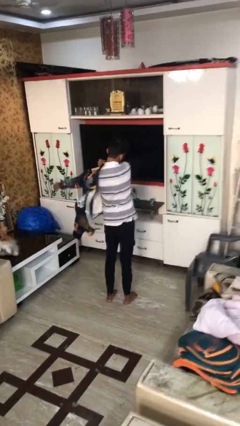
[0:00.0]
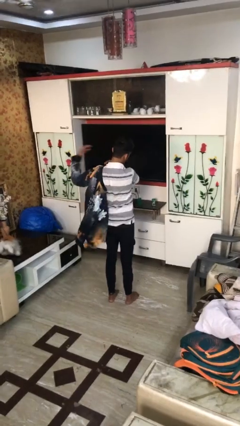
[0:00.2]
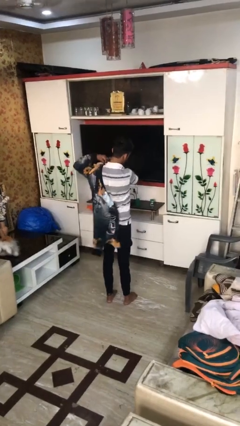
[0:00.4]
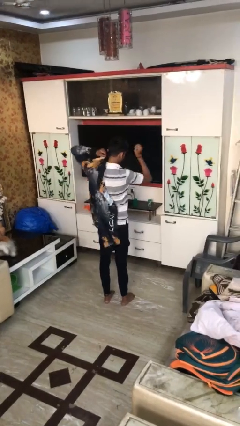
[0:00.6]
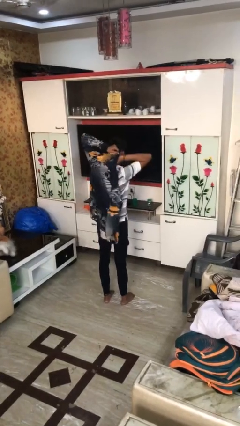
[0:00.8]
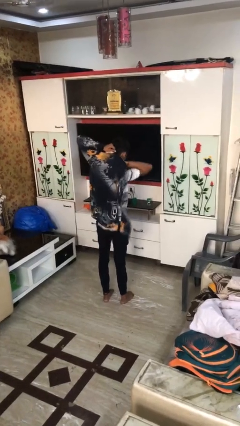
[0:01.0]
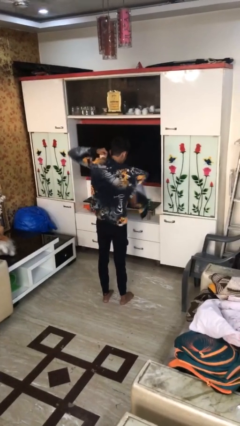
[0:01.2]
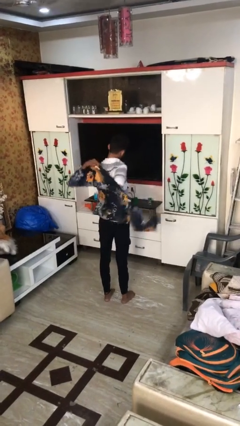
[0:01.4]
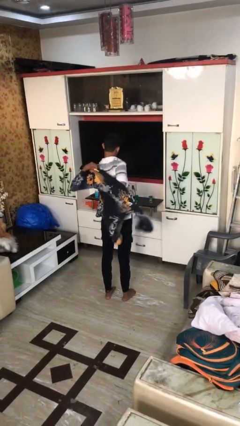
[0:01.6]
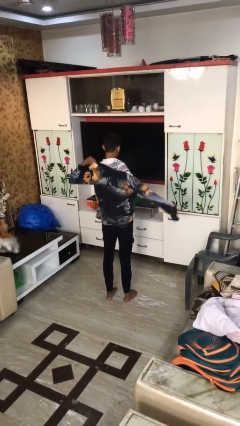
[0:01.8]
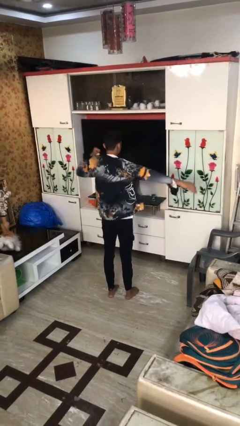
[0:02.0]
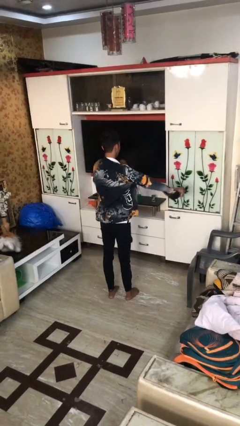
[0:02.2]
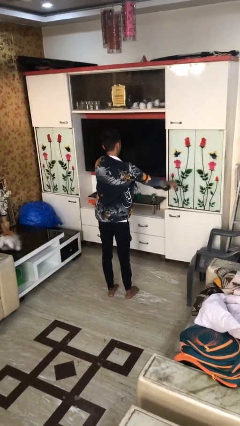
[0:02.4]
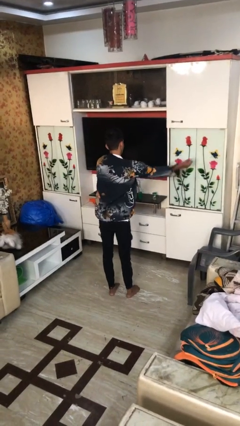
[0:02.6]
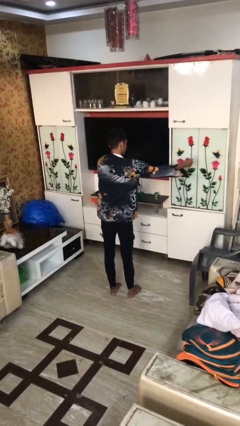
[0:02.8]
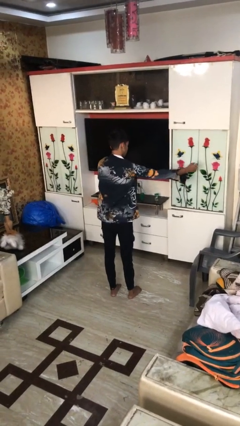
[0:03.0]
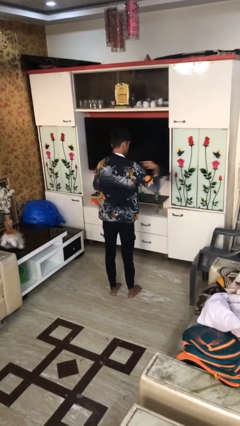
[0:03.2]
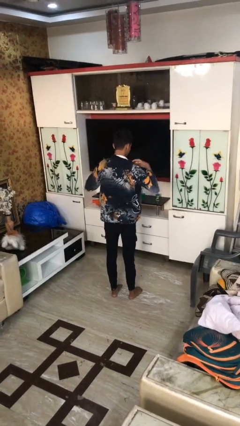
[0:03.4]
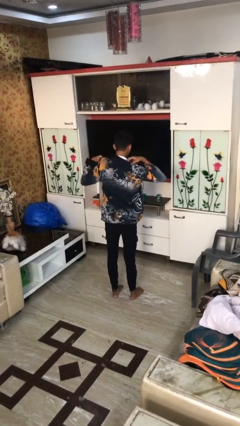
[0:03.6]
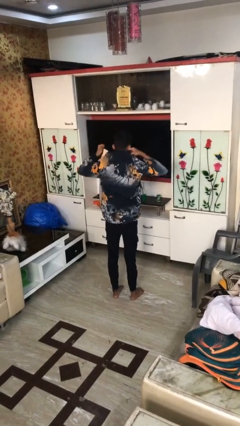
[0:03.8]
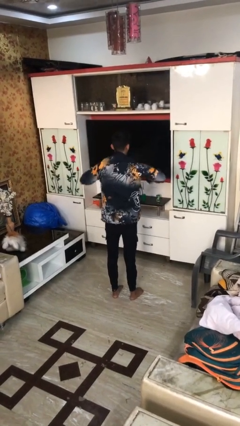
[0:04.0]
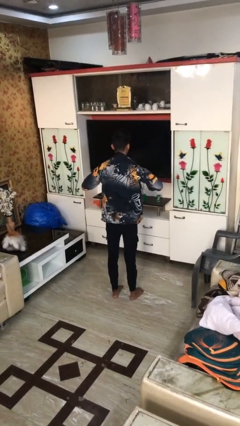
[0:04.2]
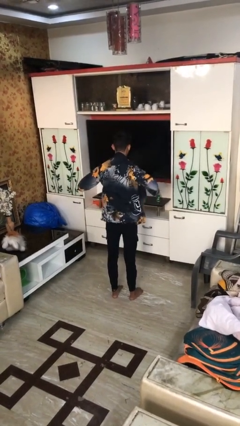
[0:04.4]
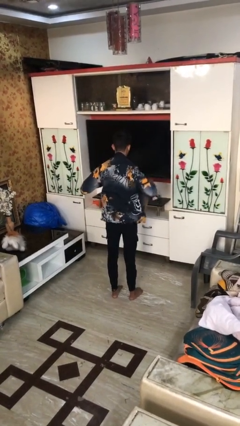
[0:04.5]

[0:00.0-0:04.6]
person puts on shirt

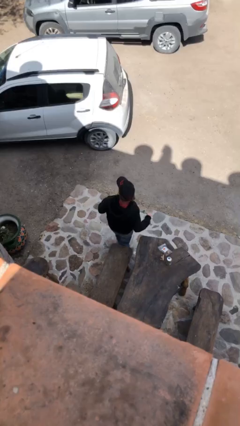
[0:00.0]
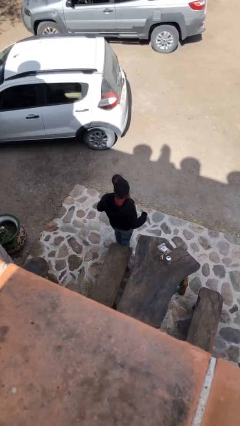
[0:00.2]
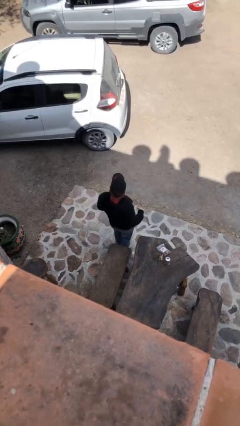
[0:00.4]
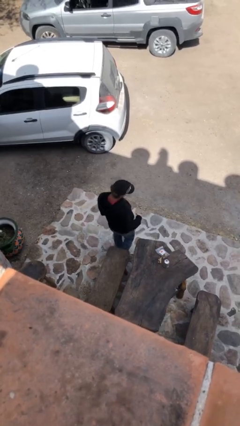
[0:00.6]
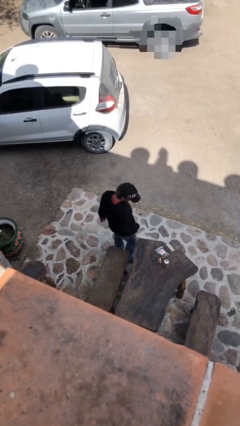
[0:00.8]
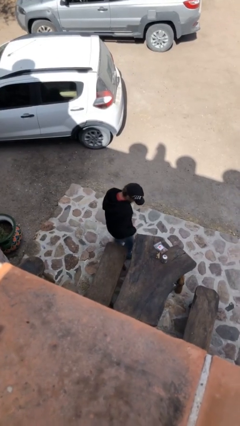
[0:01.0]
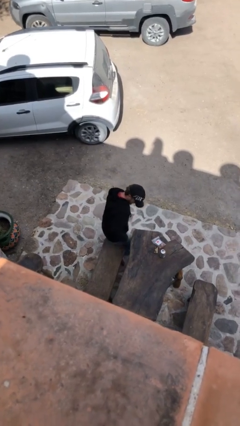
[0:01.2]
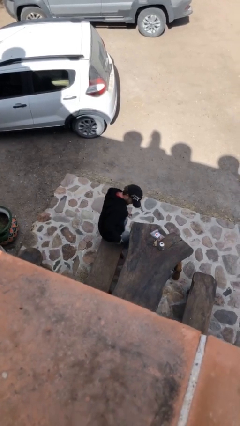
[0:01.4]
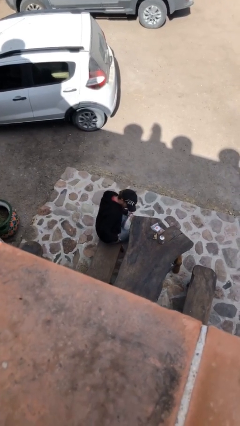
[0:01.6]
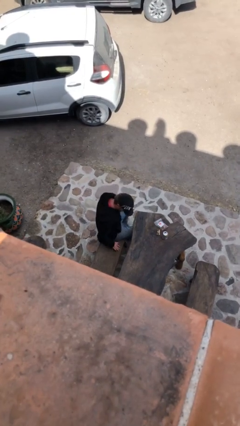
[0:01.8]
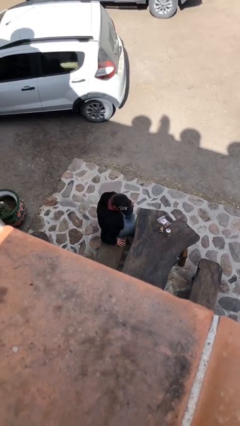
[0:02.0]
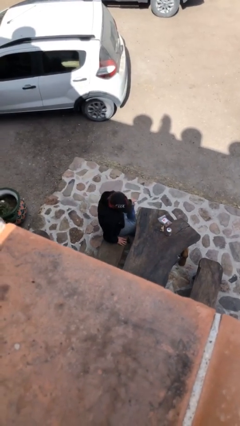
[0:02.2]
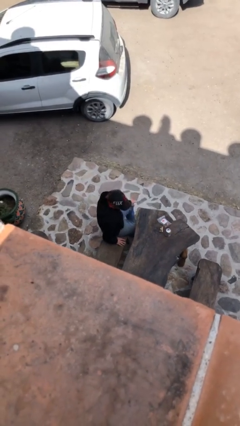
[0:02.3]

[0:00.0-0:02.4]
person sits down

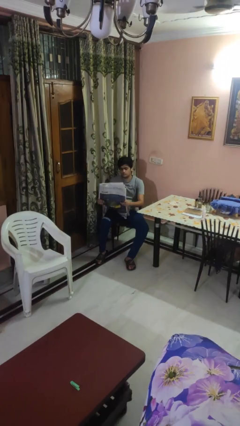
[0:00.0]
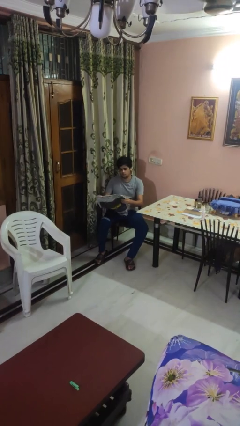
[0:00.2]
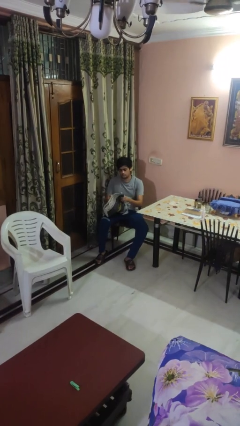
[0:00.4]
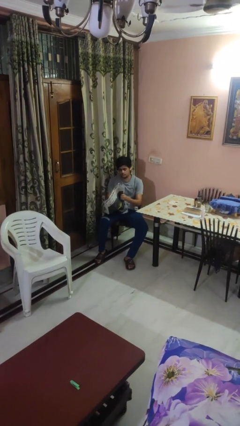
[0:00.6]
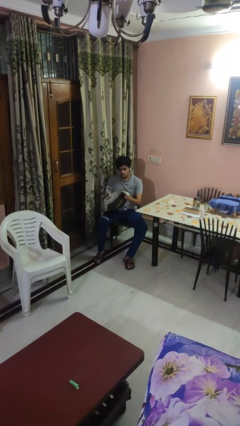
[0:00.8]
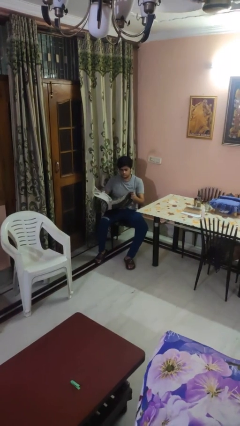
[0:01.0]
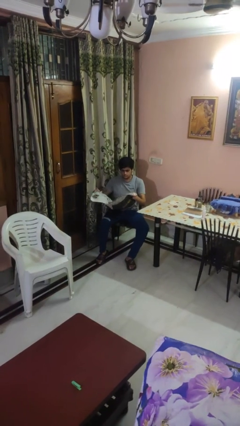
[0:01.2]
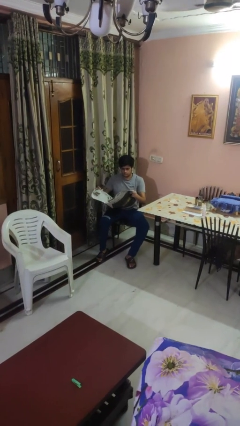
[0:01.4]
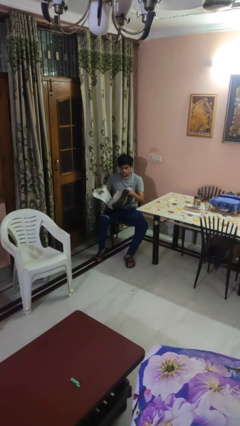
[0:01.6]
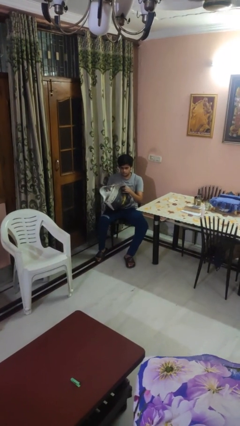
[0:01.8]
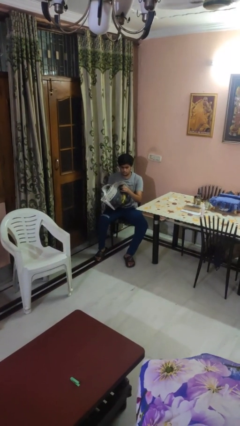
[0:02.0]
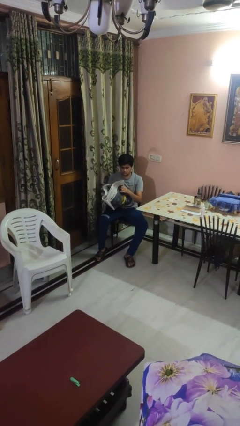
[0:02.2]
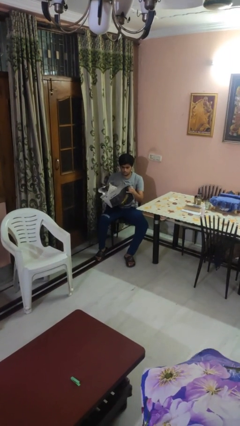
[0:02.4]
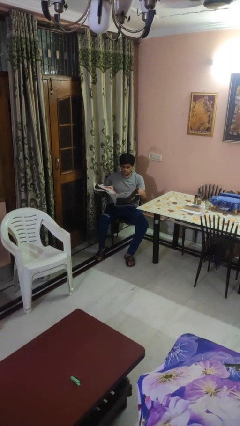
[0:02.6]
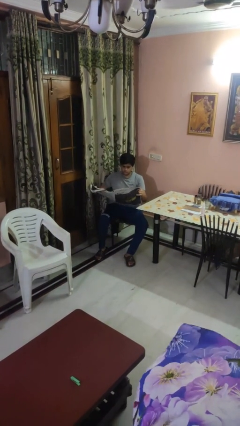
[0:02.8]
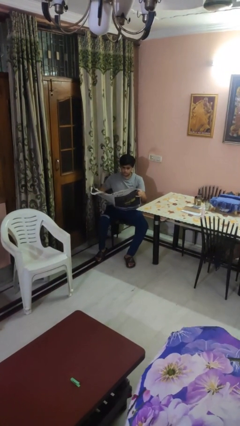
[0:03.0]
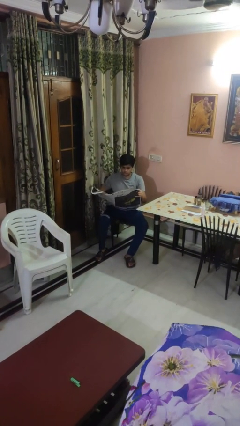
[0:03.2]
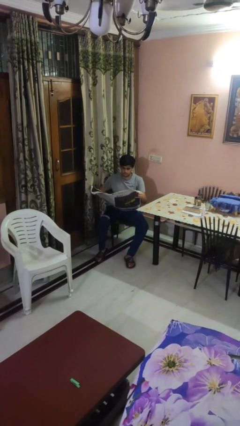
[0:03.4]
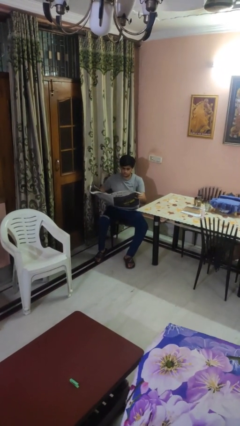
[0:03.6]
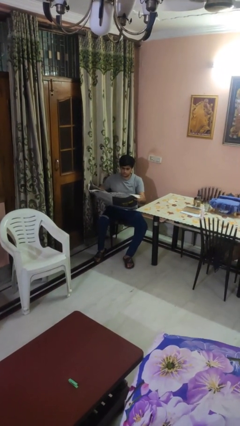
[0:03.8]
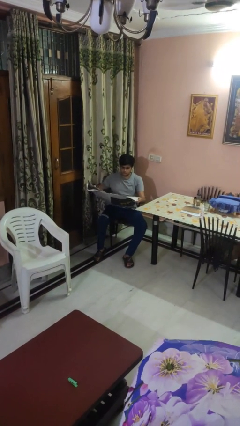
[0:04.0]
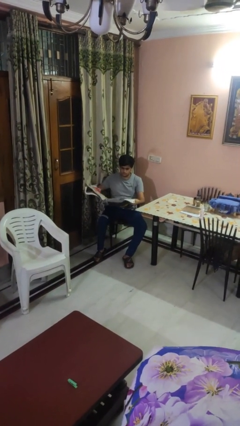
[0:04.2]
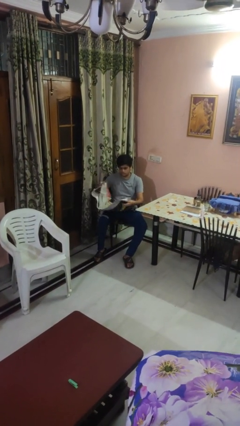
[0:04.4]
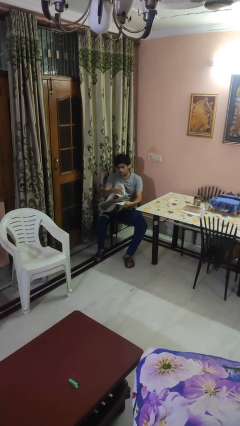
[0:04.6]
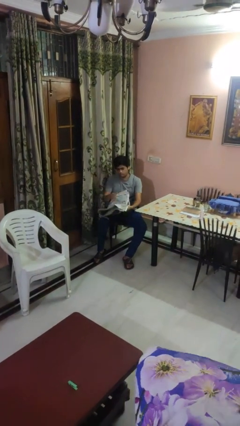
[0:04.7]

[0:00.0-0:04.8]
person reads newspaper

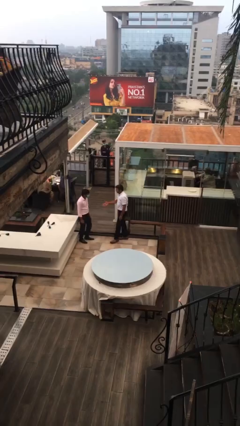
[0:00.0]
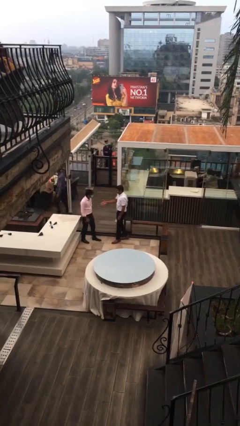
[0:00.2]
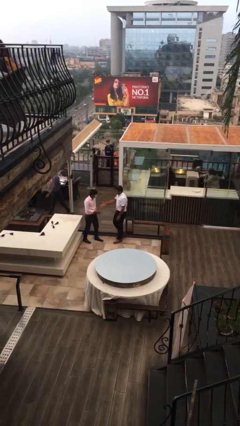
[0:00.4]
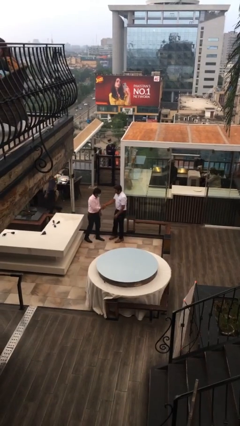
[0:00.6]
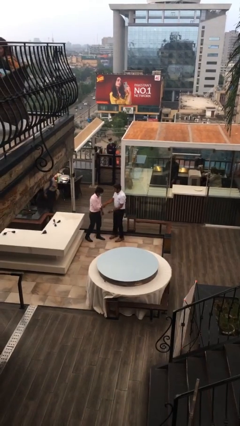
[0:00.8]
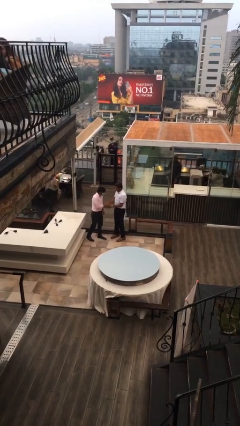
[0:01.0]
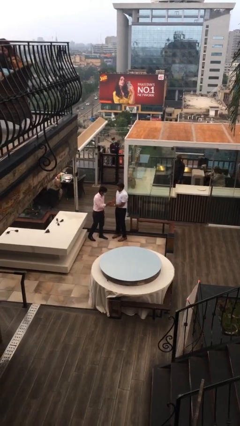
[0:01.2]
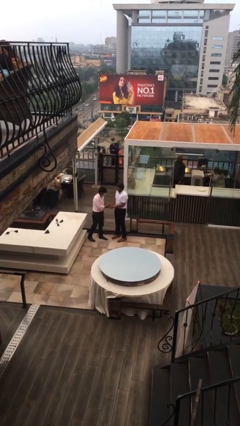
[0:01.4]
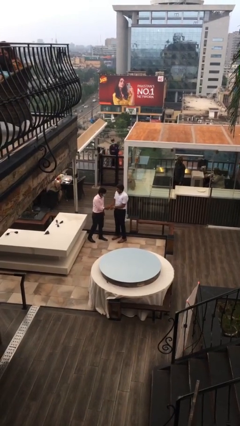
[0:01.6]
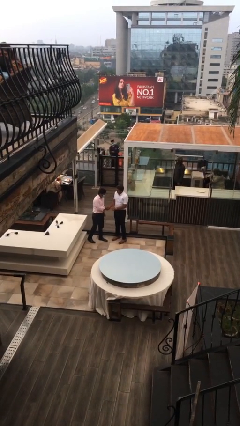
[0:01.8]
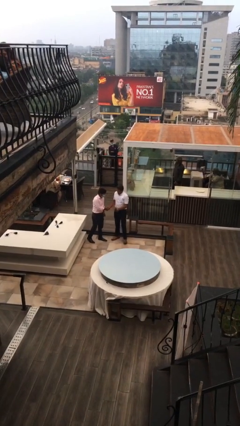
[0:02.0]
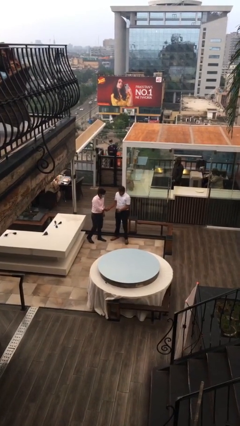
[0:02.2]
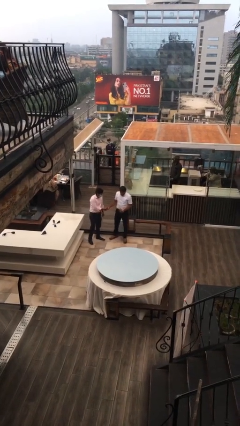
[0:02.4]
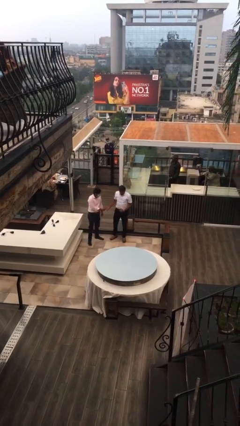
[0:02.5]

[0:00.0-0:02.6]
person shakes hand

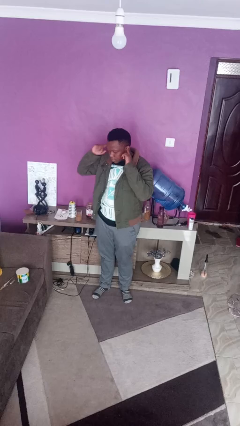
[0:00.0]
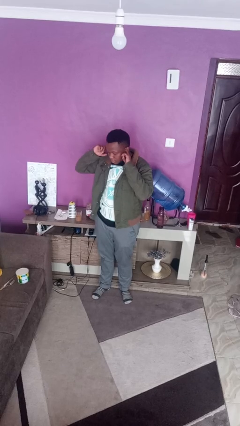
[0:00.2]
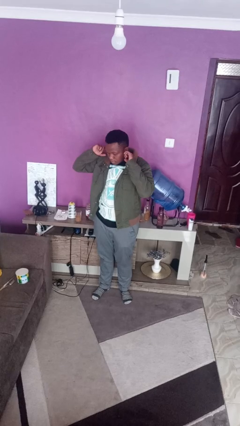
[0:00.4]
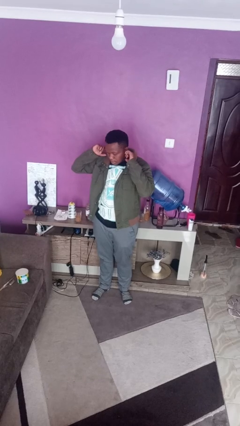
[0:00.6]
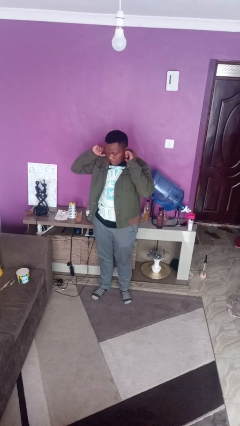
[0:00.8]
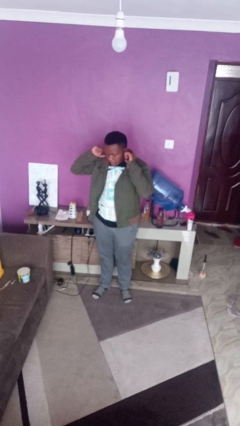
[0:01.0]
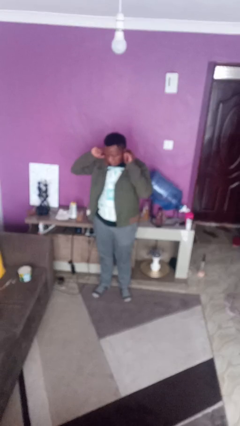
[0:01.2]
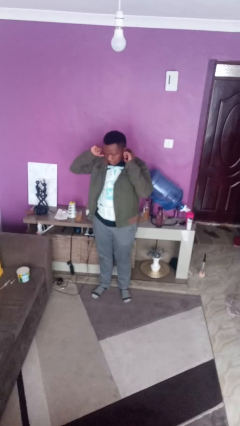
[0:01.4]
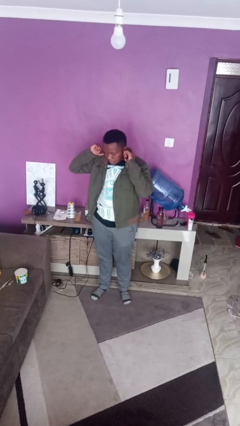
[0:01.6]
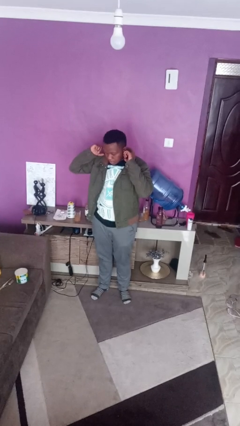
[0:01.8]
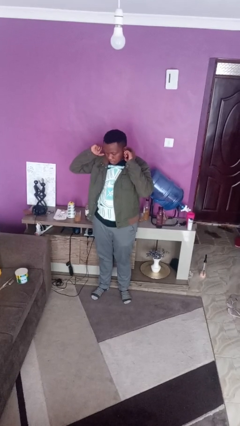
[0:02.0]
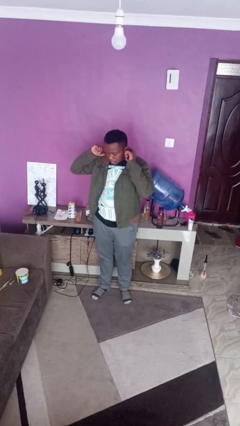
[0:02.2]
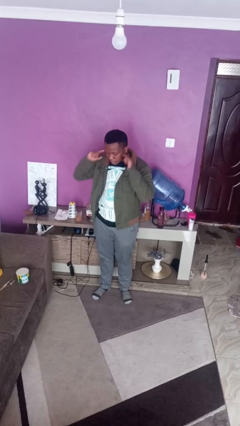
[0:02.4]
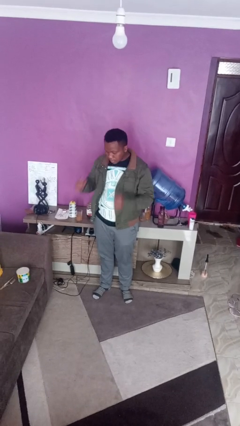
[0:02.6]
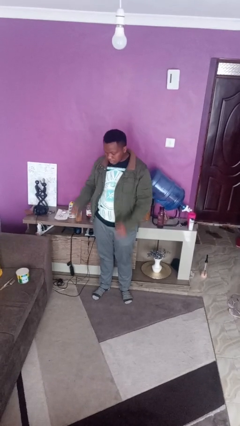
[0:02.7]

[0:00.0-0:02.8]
person puts fingers in ear

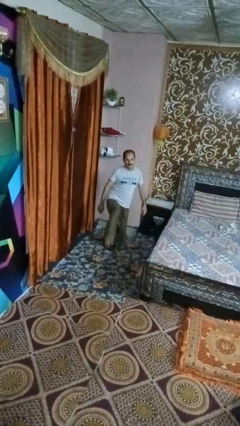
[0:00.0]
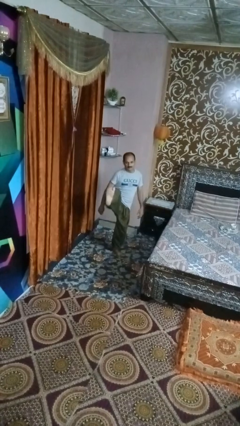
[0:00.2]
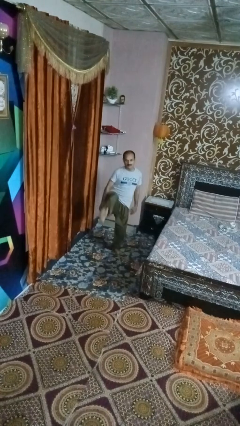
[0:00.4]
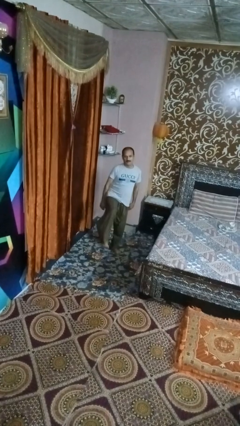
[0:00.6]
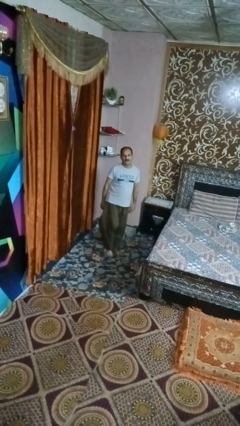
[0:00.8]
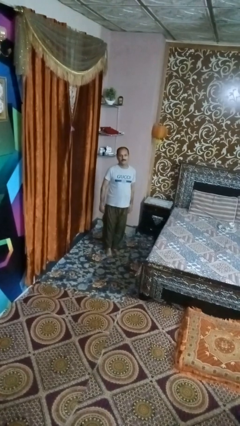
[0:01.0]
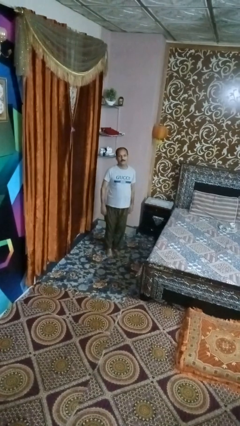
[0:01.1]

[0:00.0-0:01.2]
person karate kicks
